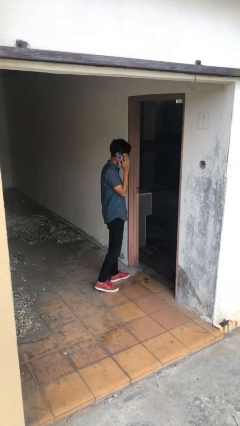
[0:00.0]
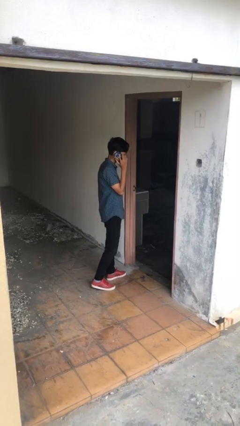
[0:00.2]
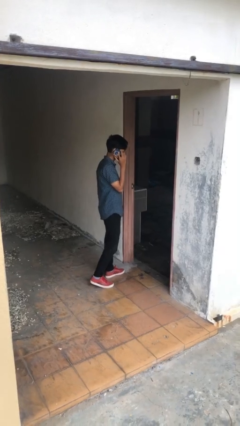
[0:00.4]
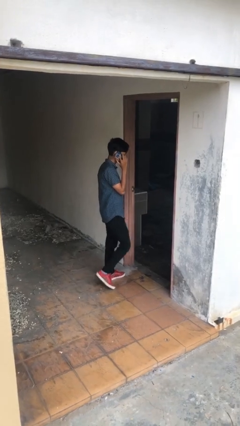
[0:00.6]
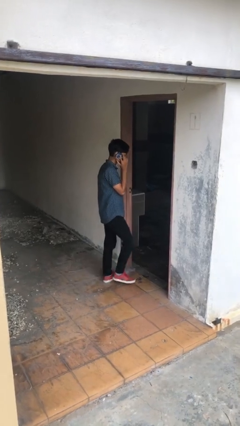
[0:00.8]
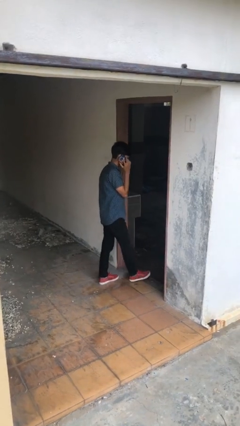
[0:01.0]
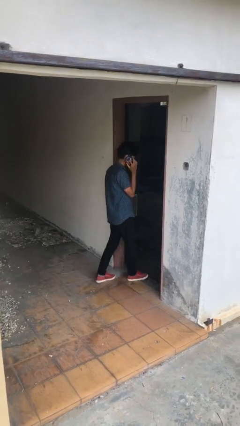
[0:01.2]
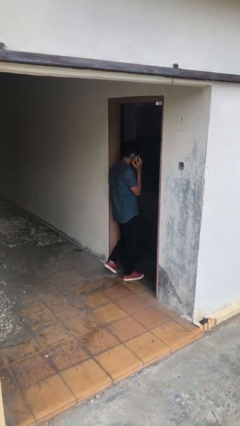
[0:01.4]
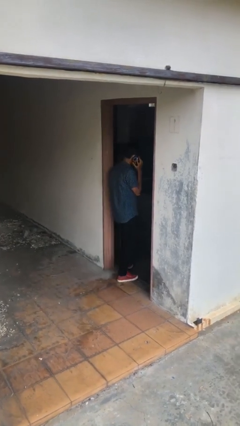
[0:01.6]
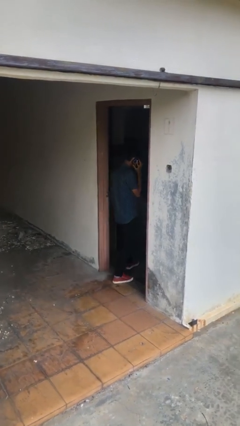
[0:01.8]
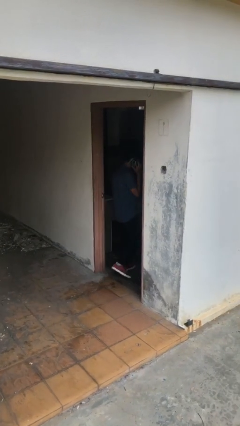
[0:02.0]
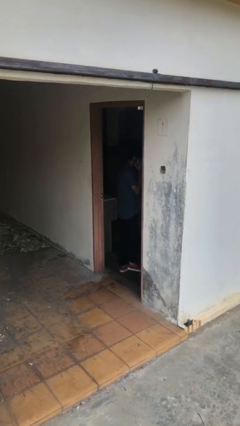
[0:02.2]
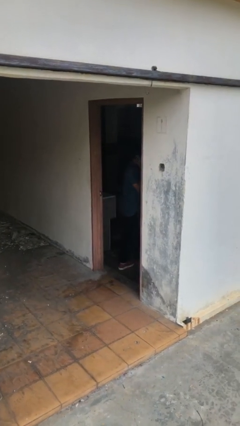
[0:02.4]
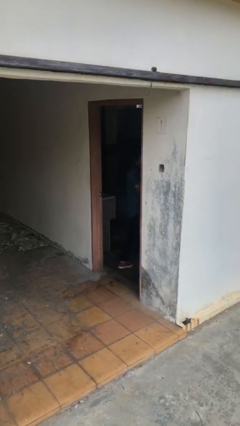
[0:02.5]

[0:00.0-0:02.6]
person exits scene through structure

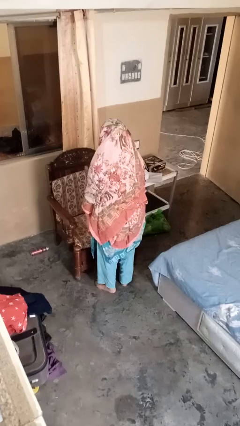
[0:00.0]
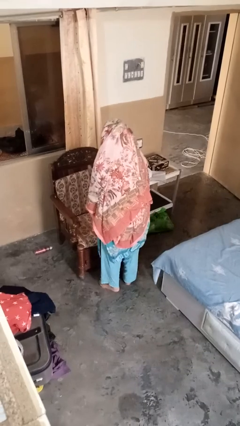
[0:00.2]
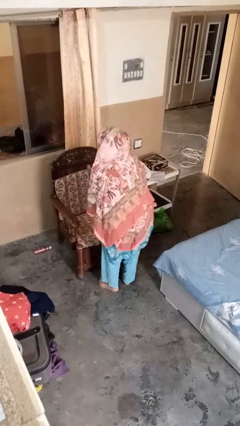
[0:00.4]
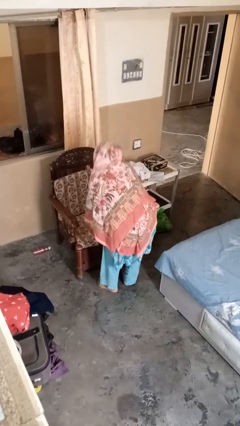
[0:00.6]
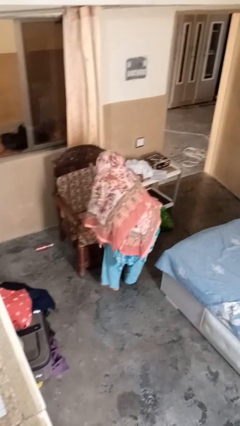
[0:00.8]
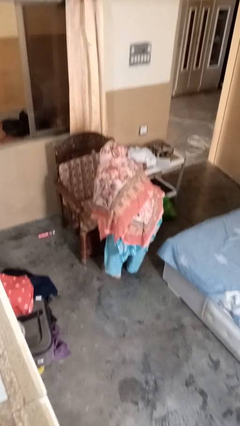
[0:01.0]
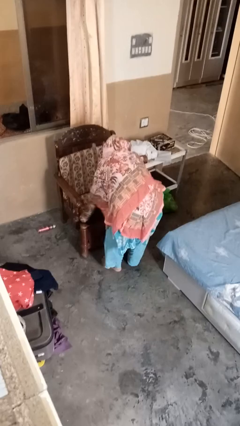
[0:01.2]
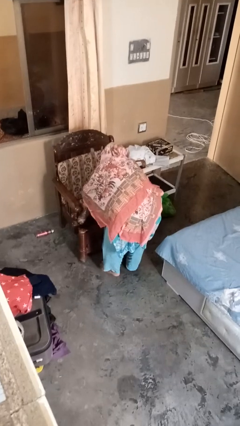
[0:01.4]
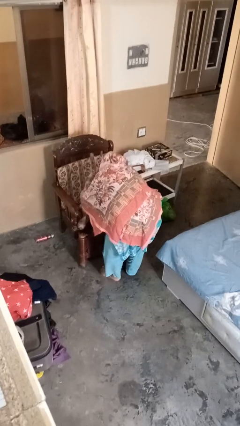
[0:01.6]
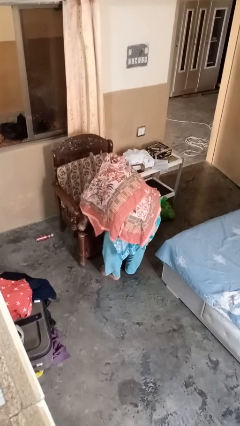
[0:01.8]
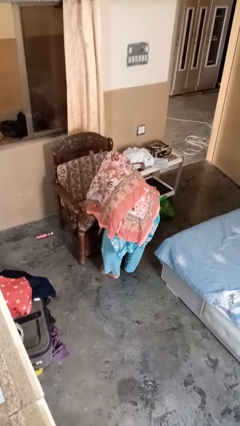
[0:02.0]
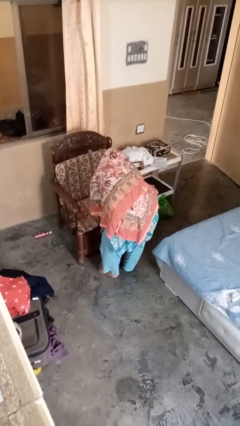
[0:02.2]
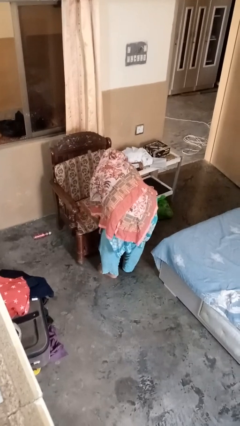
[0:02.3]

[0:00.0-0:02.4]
person searches under couch

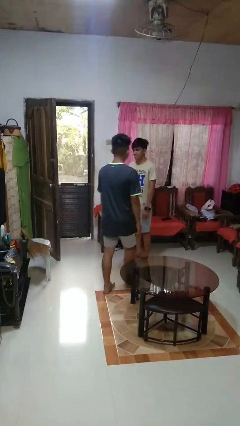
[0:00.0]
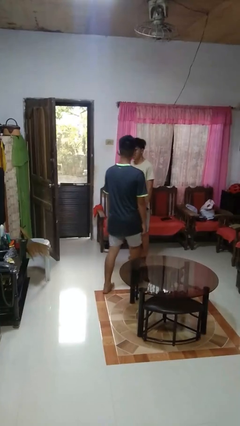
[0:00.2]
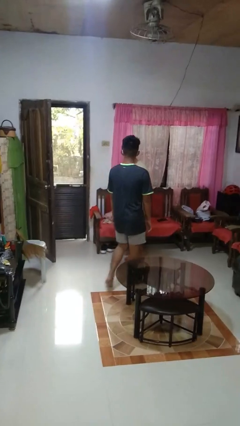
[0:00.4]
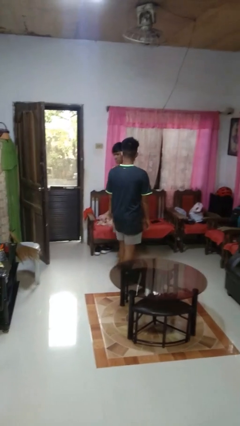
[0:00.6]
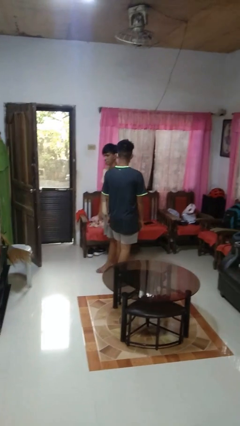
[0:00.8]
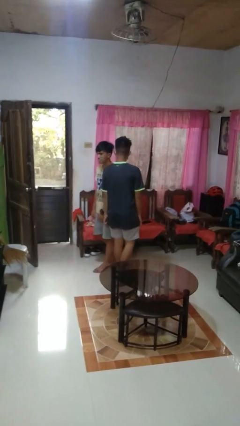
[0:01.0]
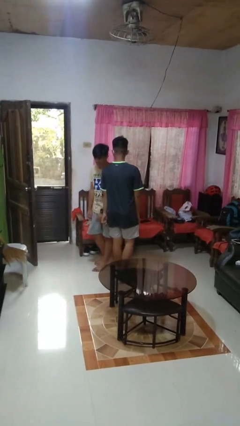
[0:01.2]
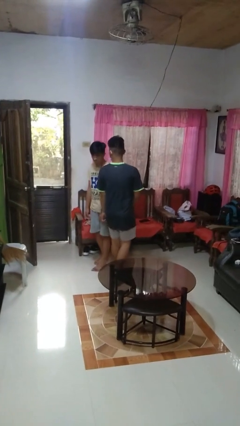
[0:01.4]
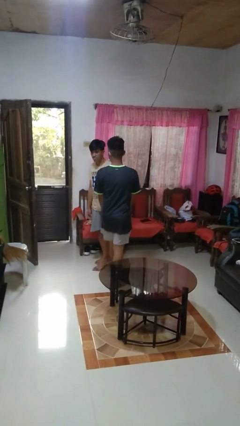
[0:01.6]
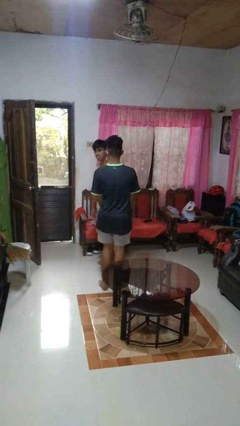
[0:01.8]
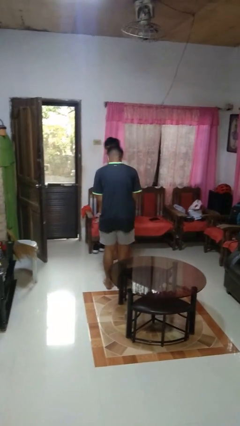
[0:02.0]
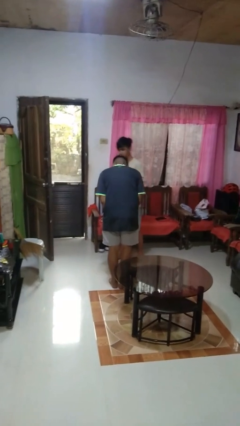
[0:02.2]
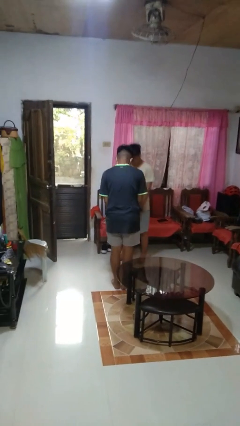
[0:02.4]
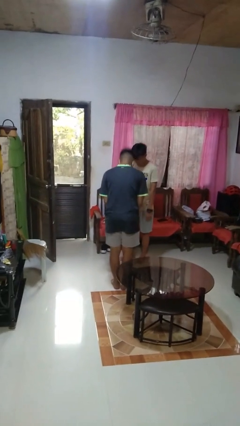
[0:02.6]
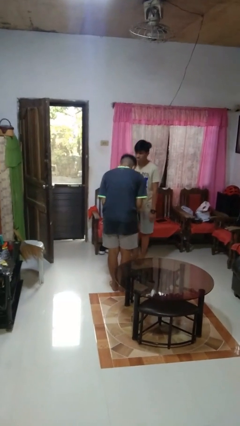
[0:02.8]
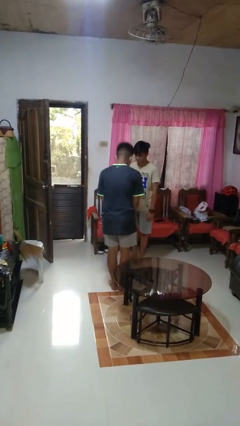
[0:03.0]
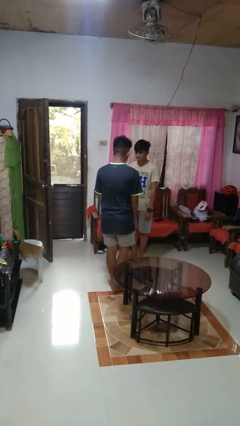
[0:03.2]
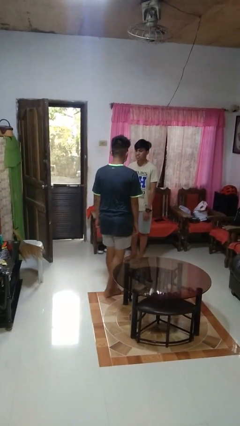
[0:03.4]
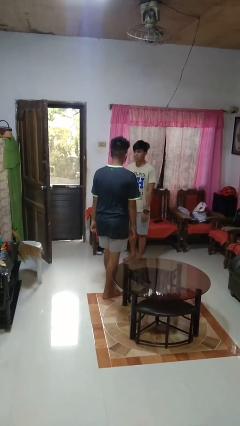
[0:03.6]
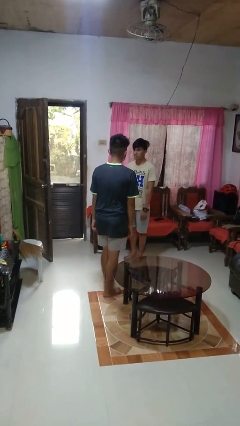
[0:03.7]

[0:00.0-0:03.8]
person bumps into person

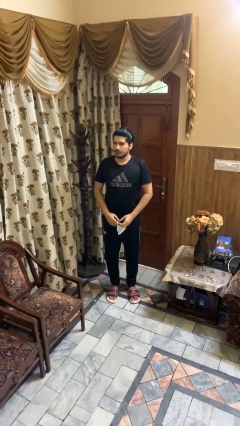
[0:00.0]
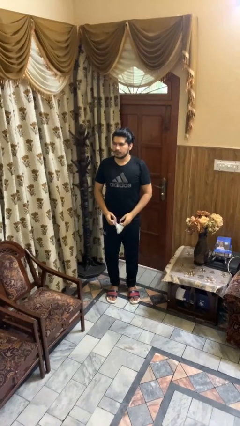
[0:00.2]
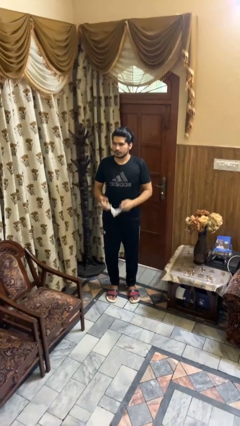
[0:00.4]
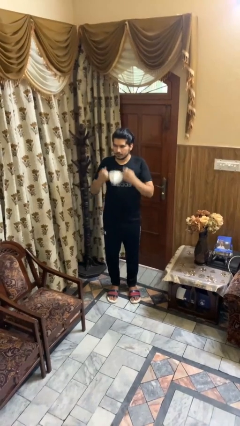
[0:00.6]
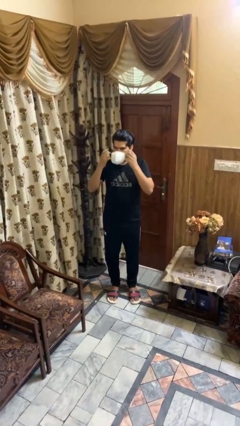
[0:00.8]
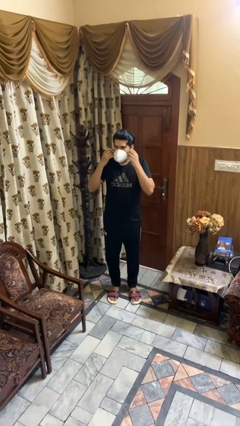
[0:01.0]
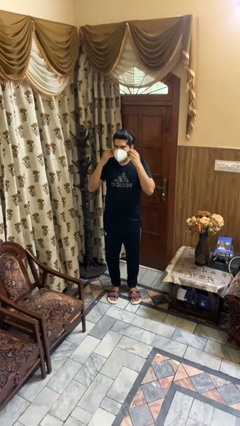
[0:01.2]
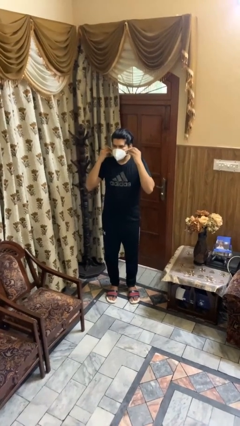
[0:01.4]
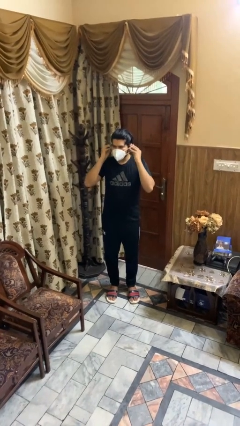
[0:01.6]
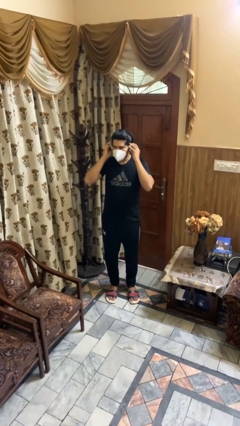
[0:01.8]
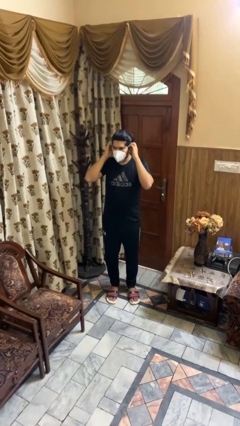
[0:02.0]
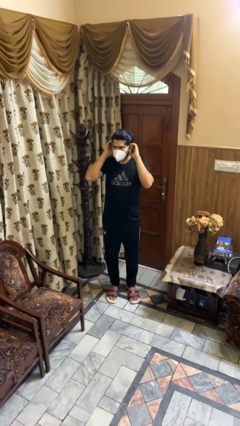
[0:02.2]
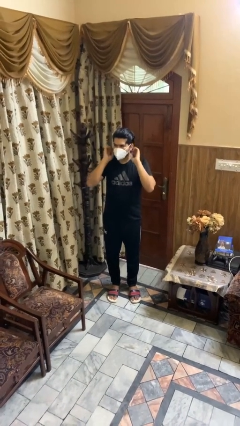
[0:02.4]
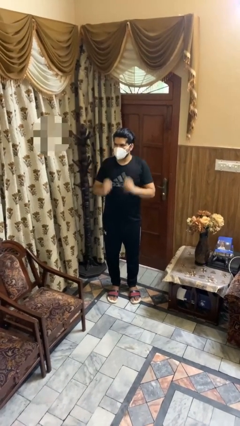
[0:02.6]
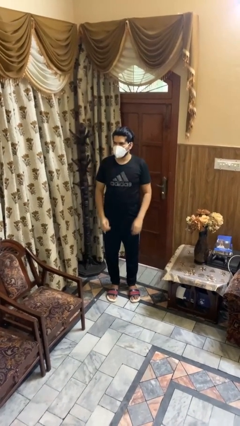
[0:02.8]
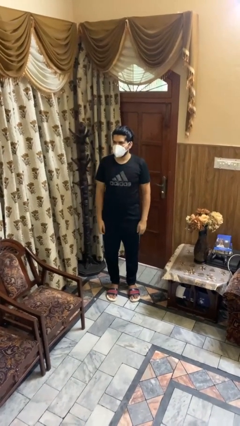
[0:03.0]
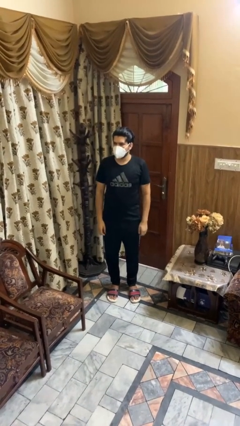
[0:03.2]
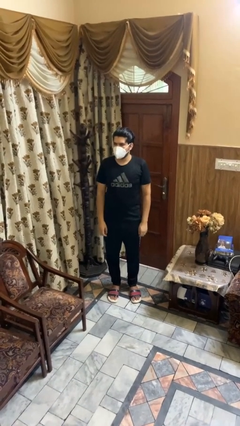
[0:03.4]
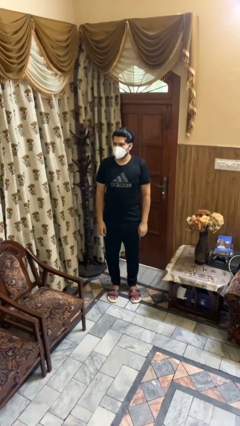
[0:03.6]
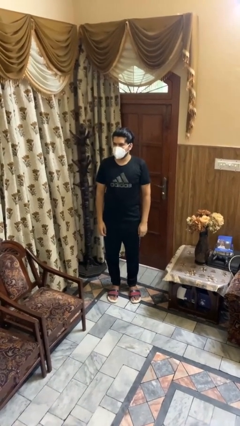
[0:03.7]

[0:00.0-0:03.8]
person puts on facemask

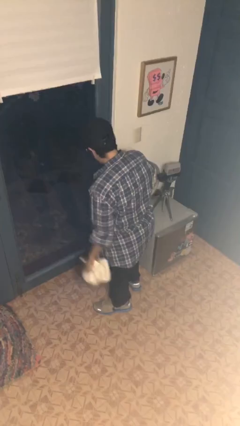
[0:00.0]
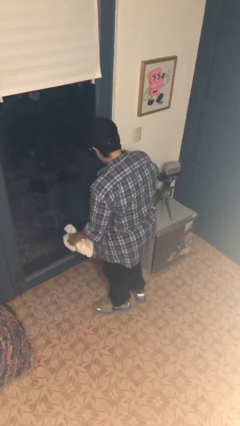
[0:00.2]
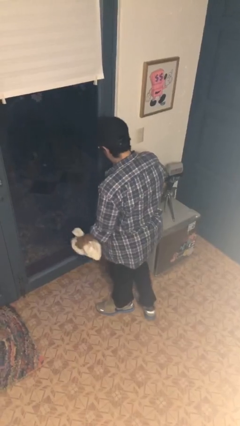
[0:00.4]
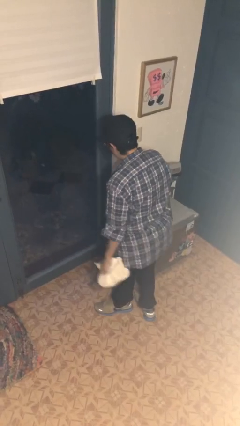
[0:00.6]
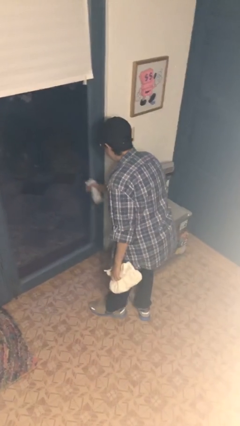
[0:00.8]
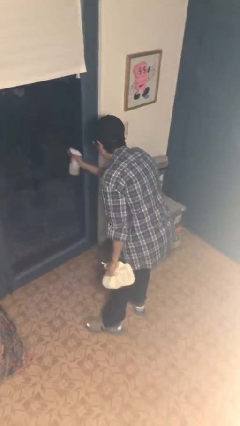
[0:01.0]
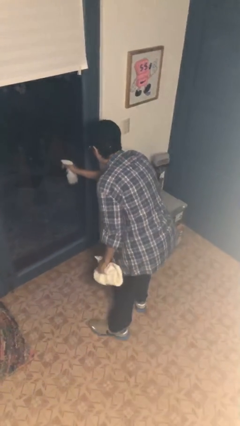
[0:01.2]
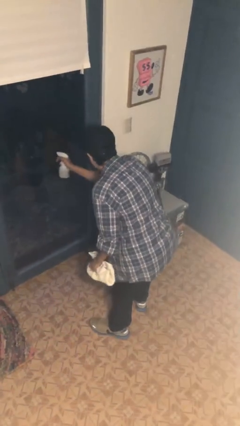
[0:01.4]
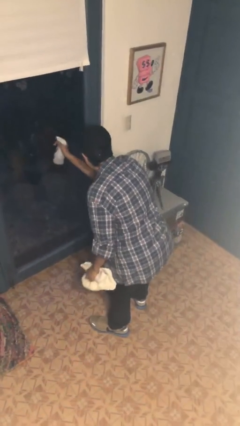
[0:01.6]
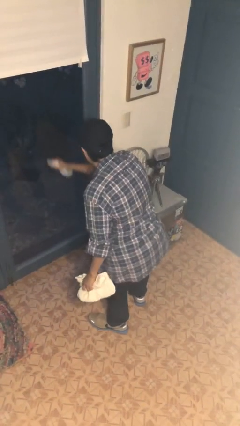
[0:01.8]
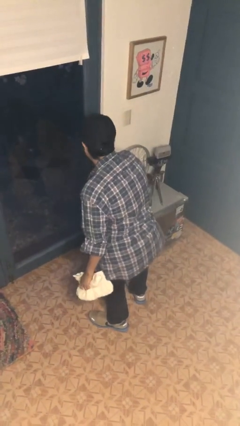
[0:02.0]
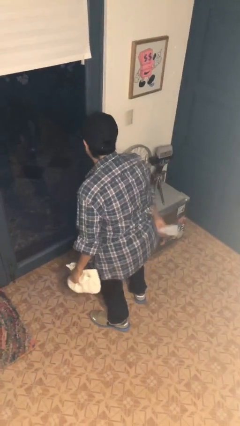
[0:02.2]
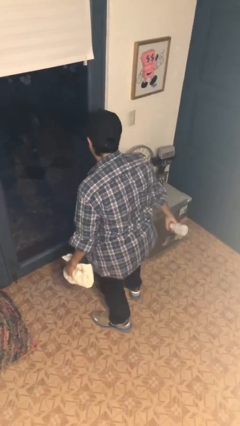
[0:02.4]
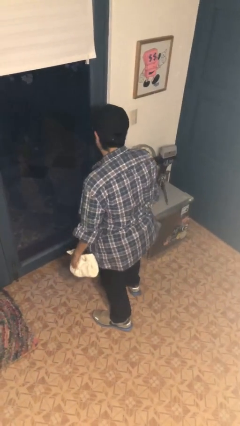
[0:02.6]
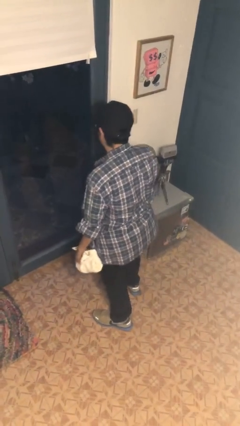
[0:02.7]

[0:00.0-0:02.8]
person sprays from bottle

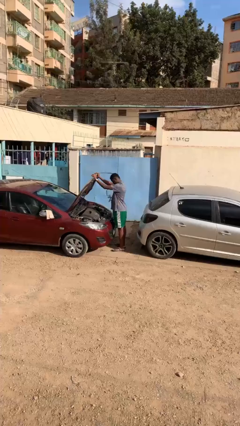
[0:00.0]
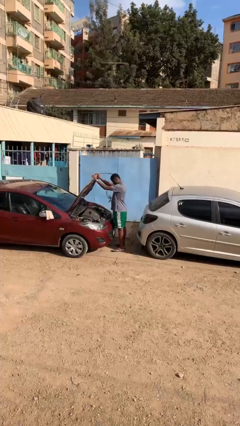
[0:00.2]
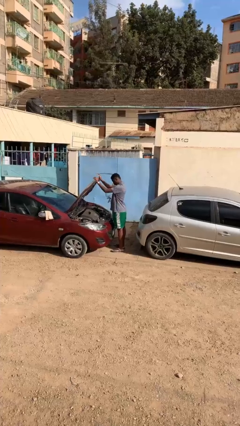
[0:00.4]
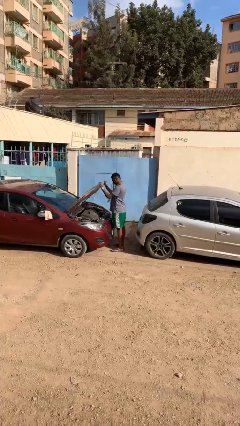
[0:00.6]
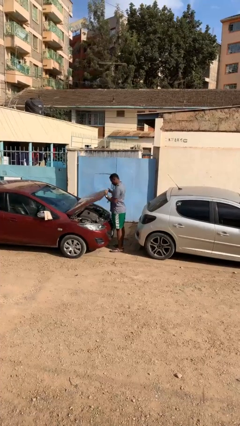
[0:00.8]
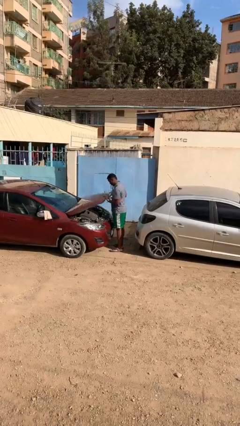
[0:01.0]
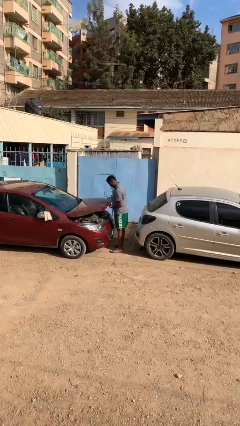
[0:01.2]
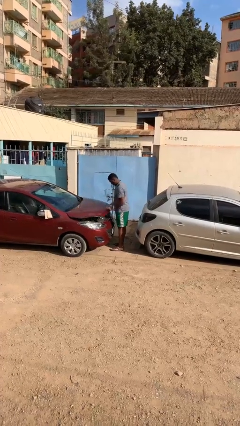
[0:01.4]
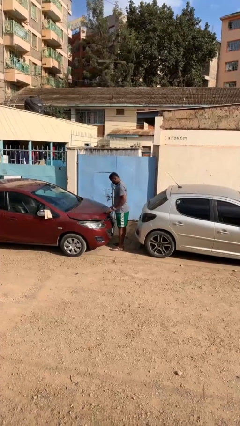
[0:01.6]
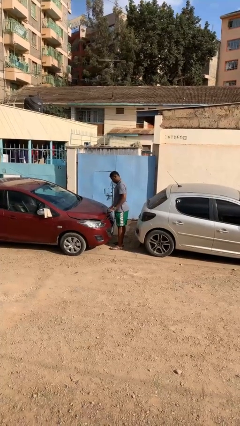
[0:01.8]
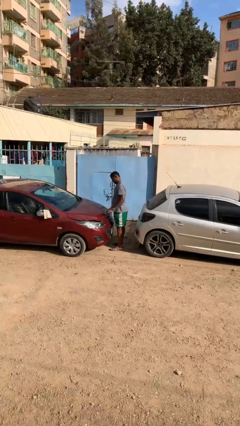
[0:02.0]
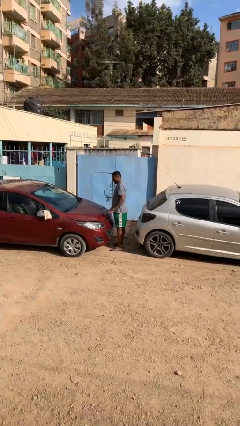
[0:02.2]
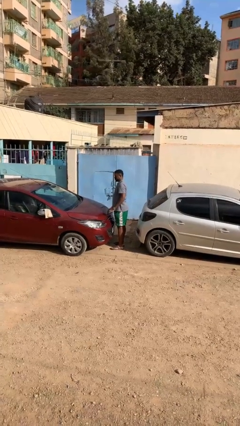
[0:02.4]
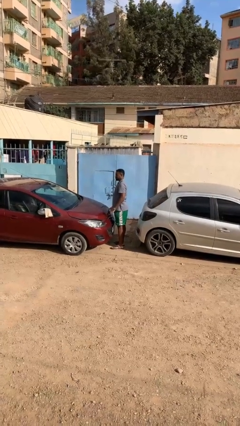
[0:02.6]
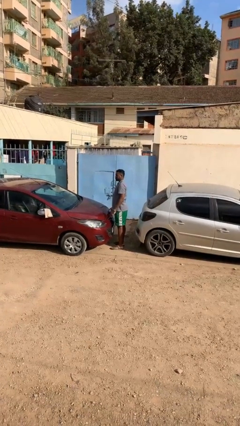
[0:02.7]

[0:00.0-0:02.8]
person closes car hood
